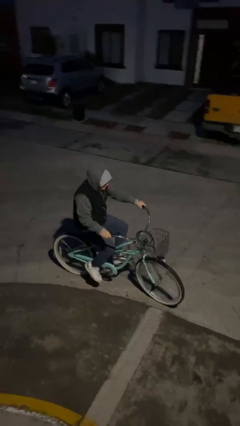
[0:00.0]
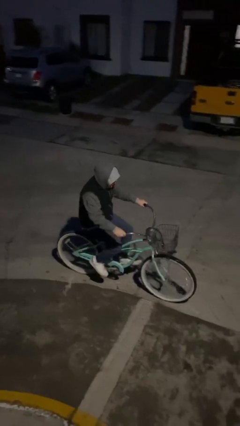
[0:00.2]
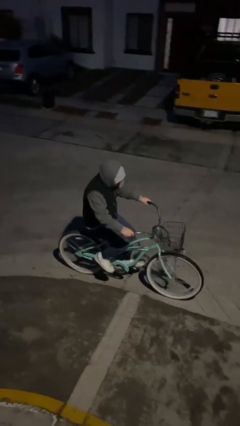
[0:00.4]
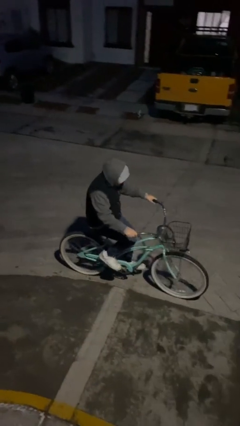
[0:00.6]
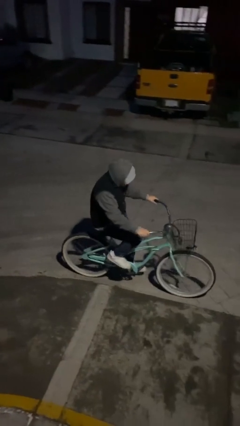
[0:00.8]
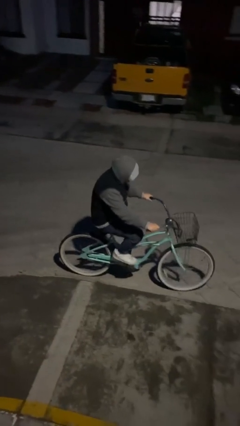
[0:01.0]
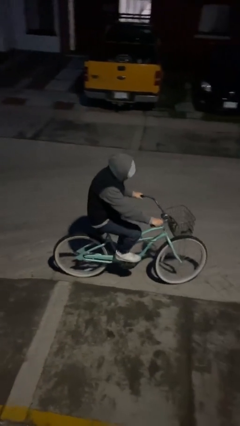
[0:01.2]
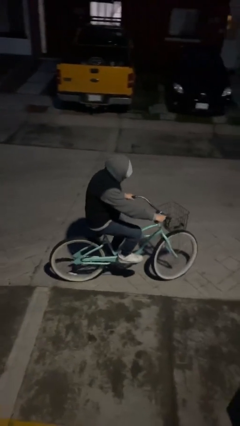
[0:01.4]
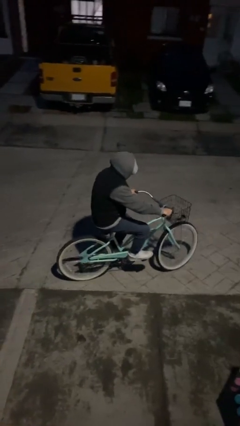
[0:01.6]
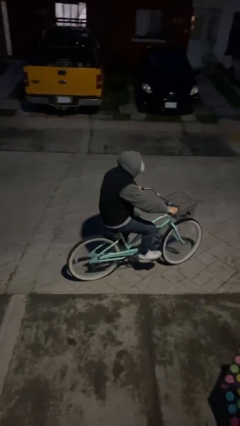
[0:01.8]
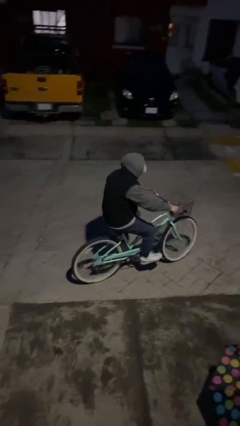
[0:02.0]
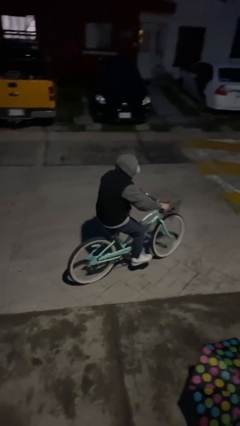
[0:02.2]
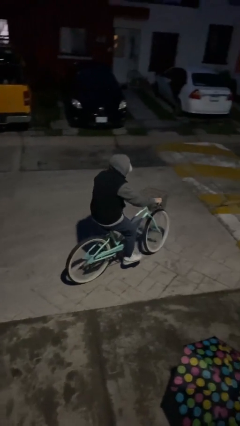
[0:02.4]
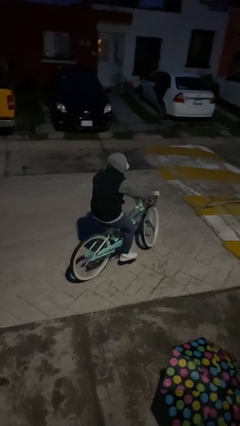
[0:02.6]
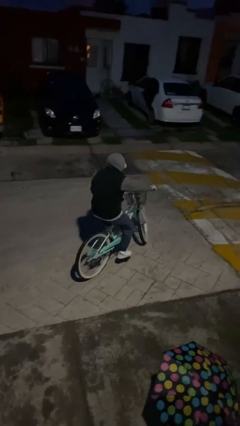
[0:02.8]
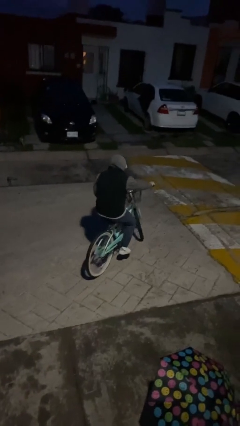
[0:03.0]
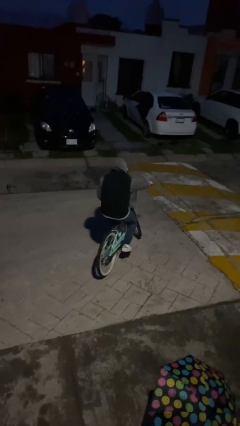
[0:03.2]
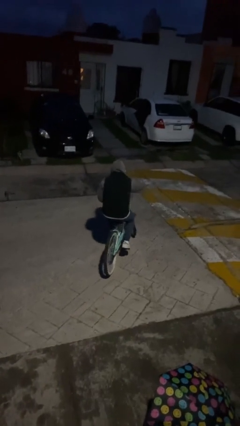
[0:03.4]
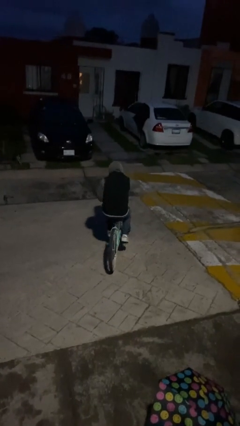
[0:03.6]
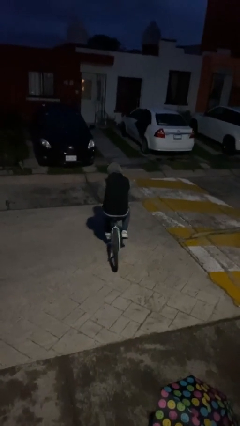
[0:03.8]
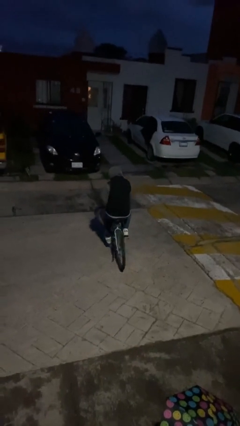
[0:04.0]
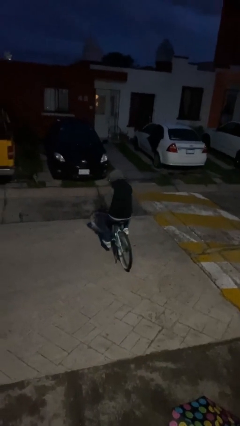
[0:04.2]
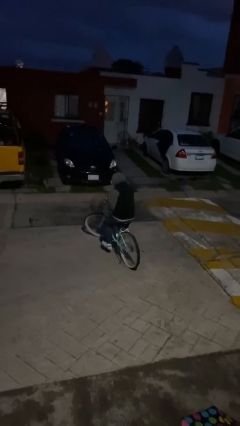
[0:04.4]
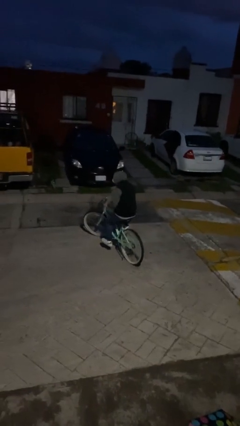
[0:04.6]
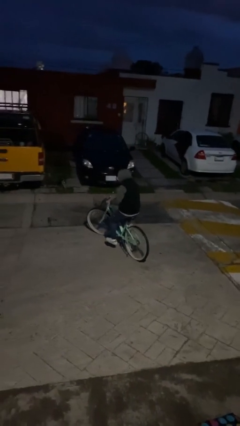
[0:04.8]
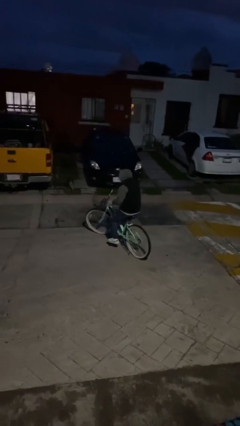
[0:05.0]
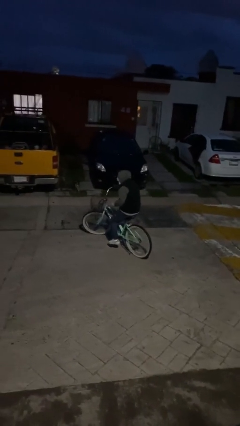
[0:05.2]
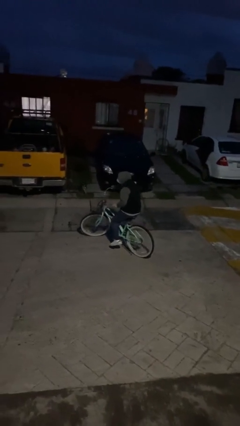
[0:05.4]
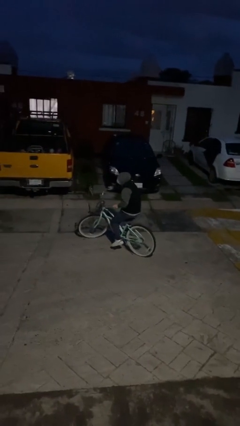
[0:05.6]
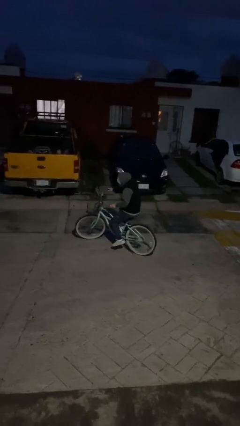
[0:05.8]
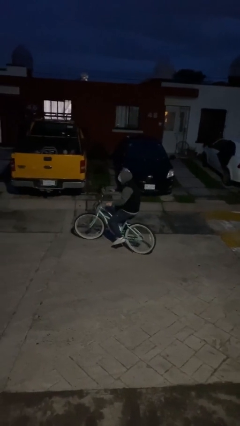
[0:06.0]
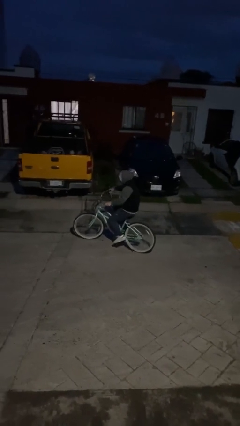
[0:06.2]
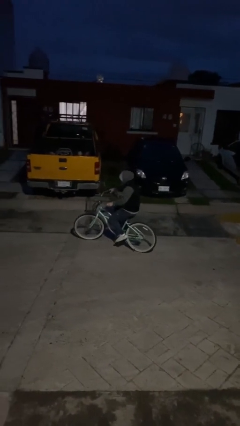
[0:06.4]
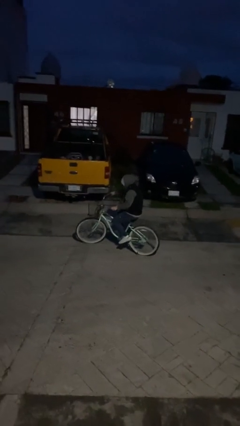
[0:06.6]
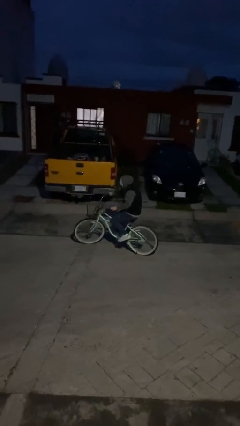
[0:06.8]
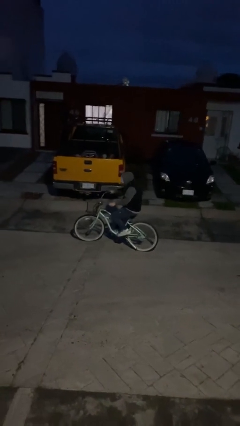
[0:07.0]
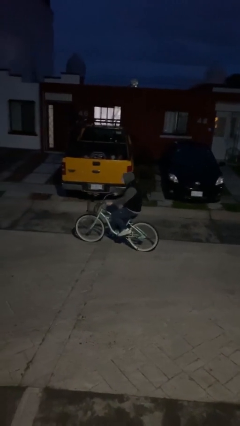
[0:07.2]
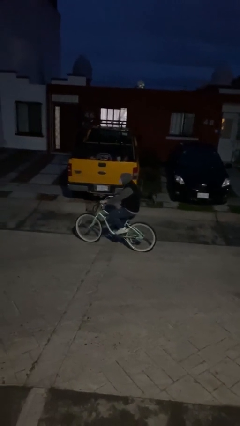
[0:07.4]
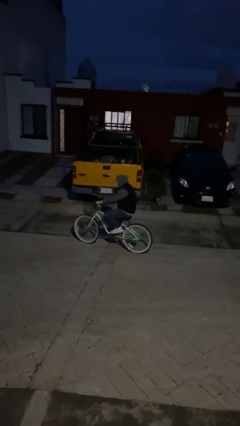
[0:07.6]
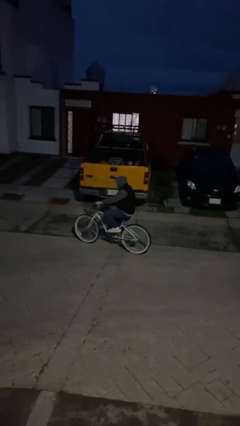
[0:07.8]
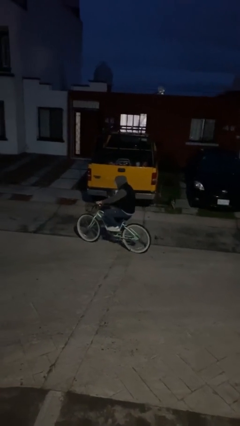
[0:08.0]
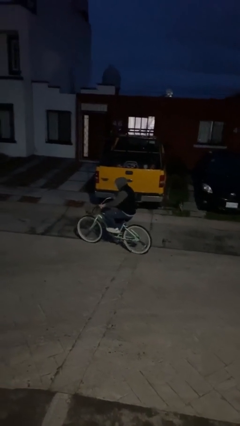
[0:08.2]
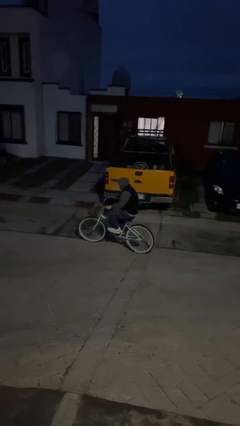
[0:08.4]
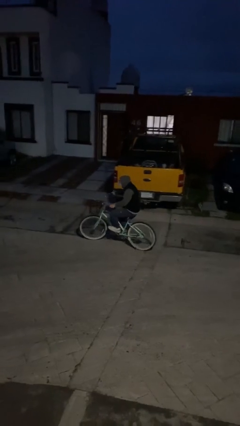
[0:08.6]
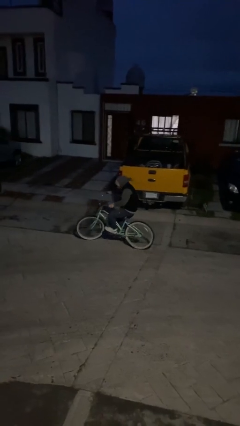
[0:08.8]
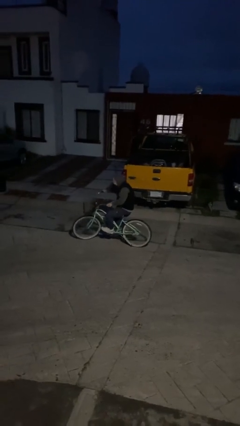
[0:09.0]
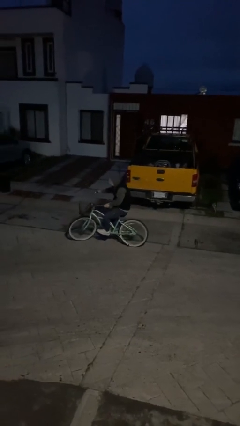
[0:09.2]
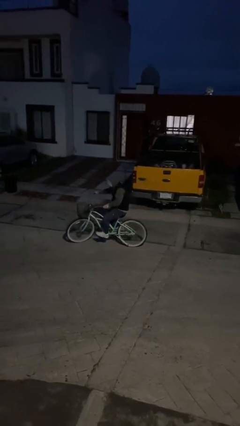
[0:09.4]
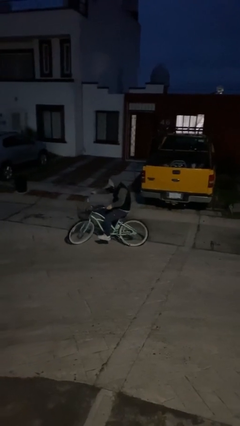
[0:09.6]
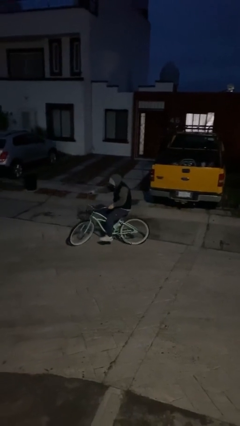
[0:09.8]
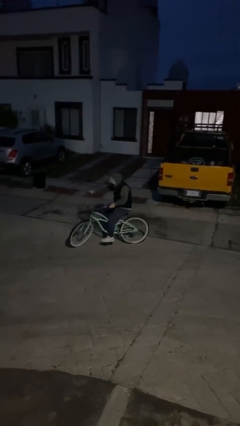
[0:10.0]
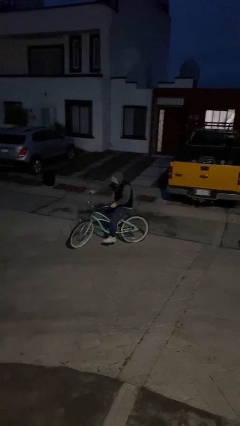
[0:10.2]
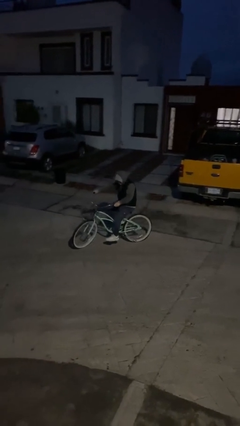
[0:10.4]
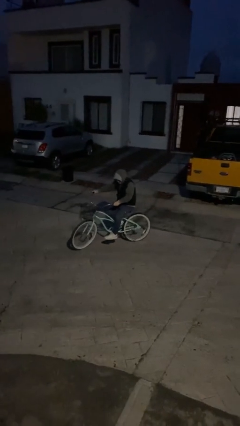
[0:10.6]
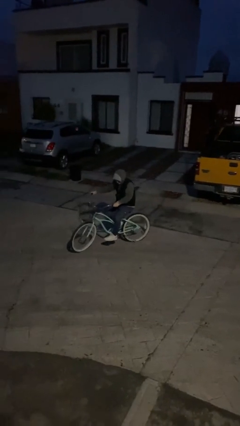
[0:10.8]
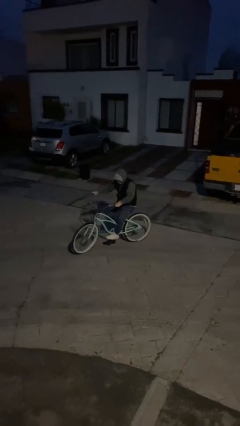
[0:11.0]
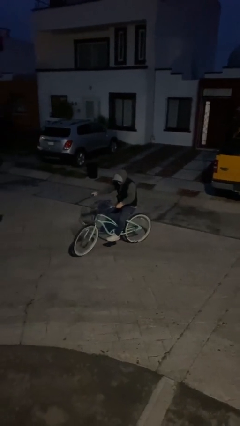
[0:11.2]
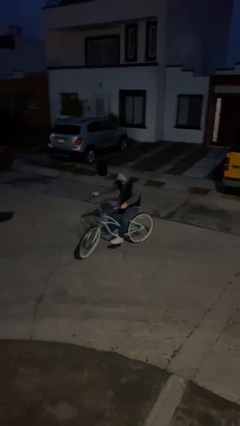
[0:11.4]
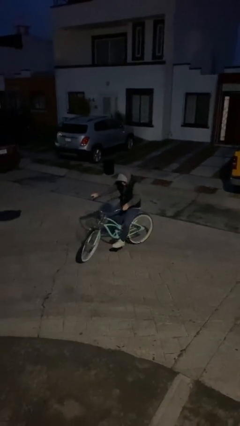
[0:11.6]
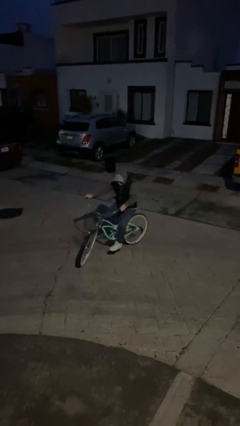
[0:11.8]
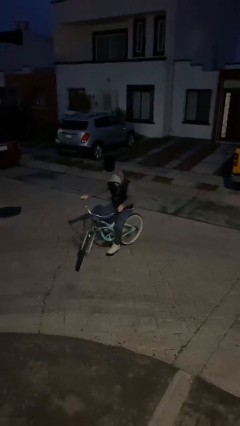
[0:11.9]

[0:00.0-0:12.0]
person rides bicycle

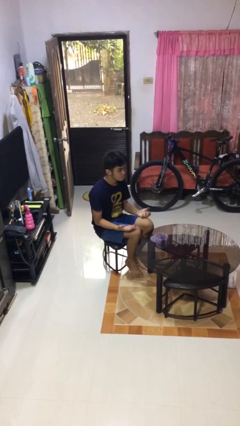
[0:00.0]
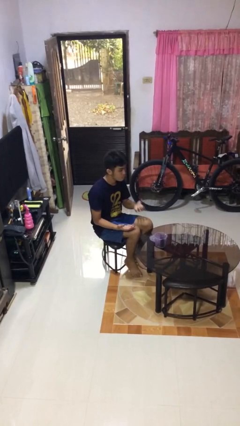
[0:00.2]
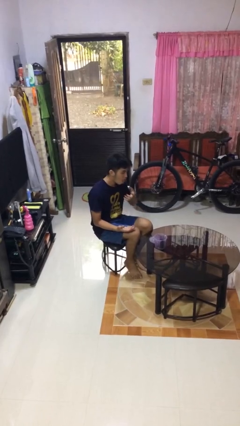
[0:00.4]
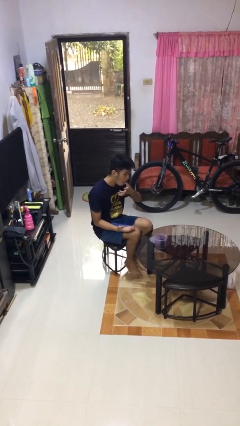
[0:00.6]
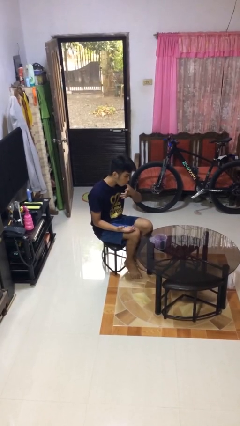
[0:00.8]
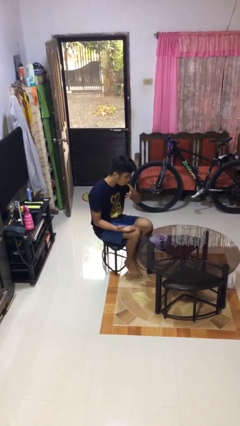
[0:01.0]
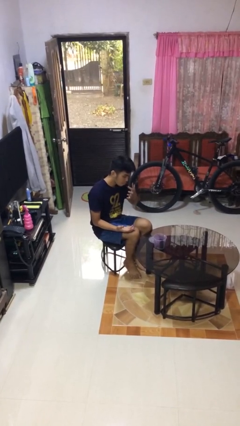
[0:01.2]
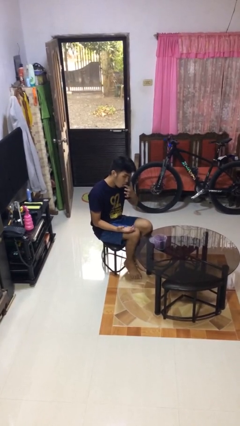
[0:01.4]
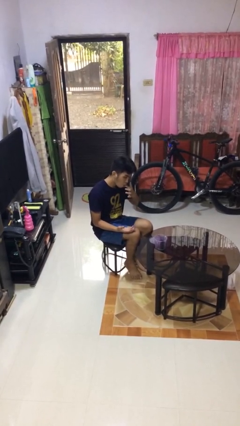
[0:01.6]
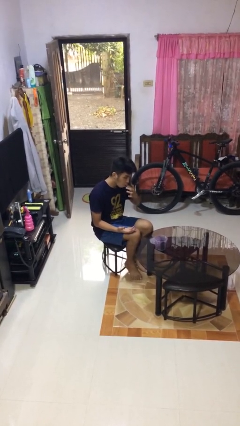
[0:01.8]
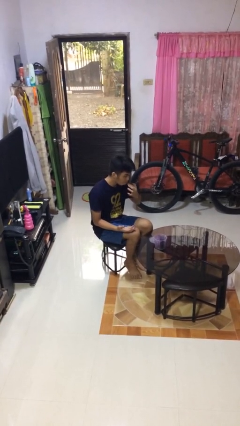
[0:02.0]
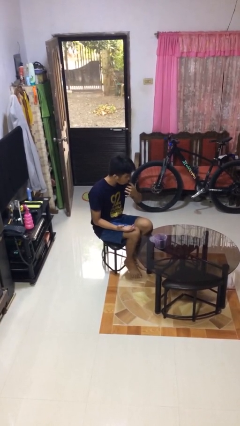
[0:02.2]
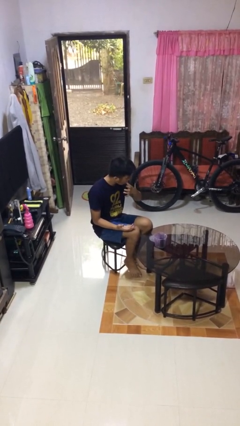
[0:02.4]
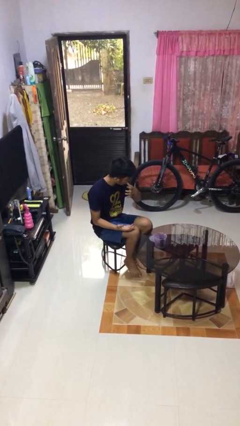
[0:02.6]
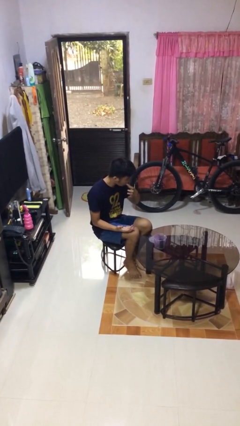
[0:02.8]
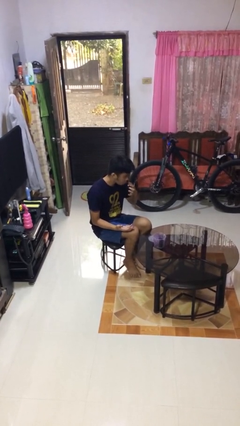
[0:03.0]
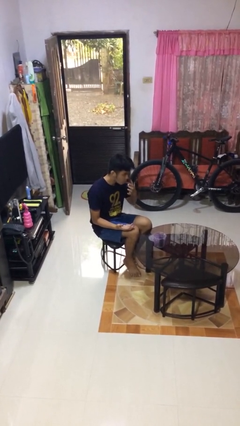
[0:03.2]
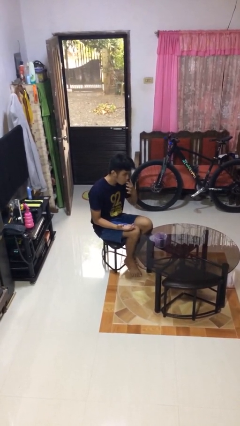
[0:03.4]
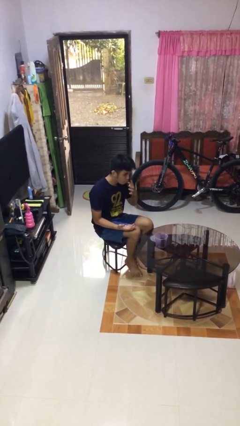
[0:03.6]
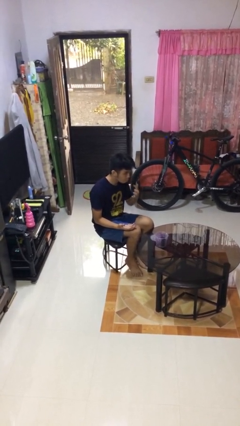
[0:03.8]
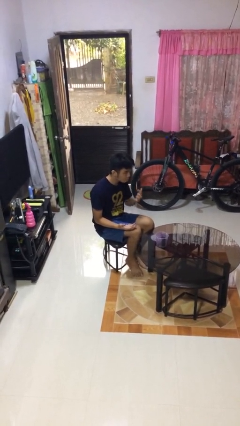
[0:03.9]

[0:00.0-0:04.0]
person licks fingers

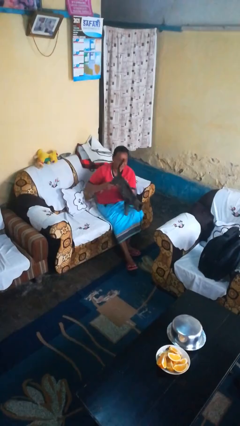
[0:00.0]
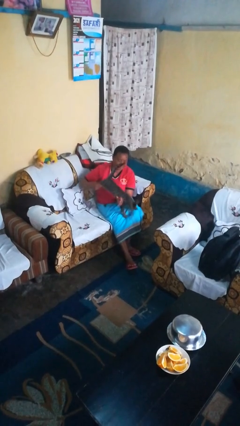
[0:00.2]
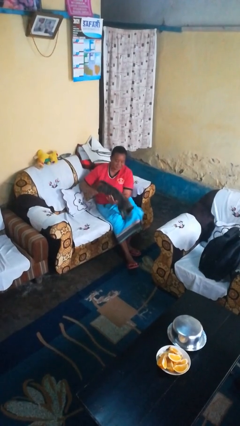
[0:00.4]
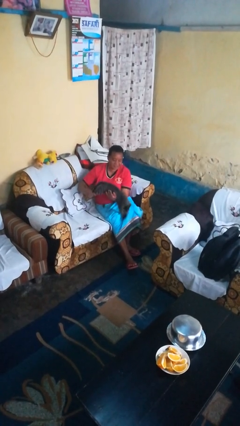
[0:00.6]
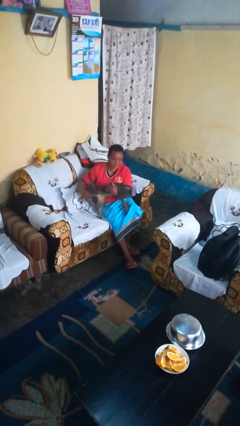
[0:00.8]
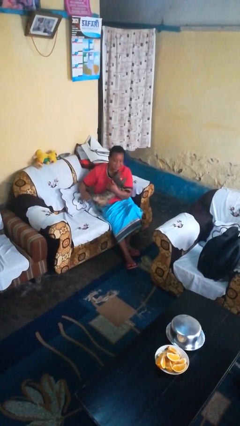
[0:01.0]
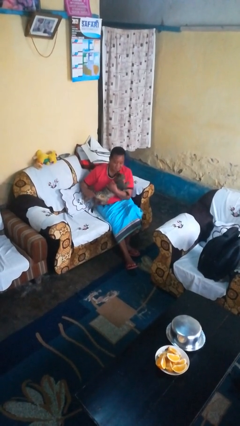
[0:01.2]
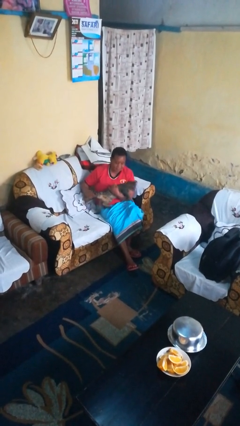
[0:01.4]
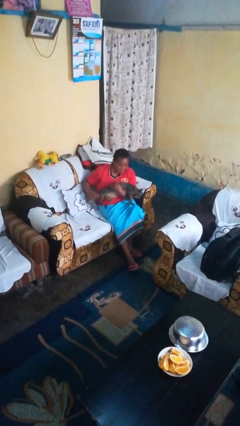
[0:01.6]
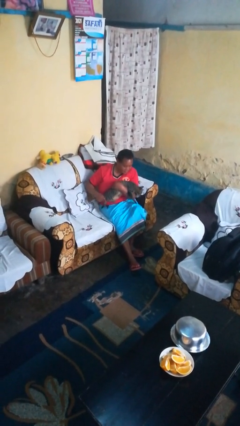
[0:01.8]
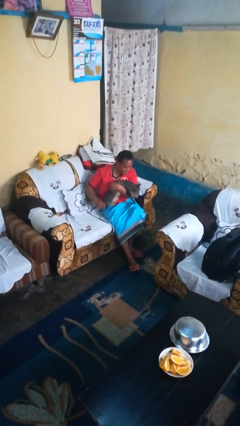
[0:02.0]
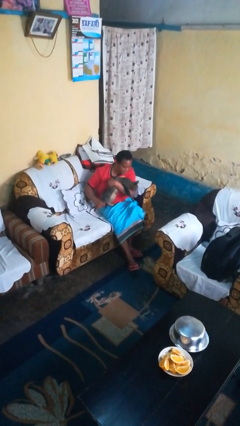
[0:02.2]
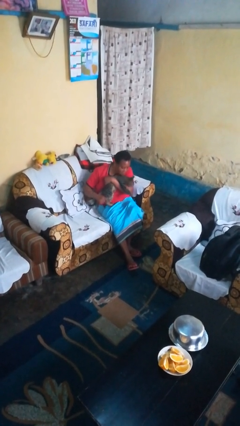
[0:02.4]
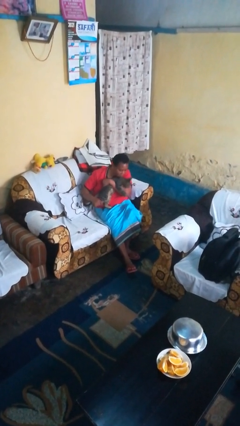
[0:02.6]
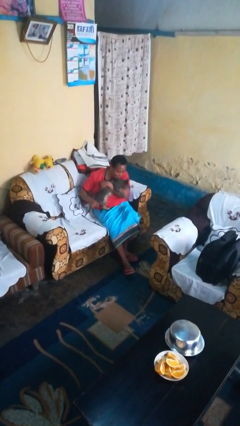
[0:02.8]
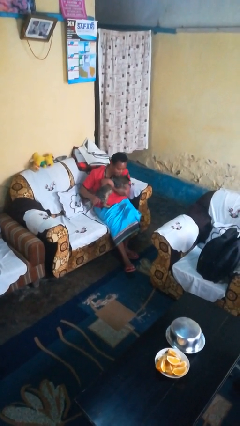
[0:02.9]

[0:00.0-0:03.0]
person hugs cat
